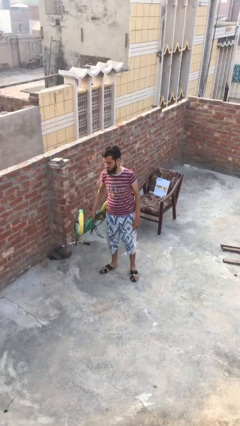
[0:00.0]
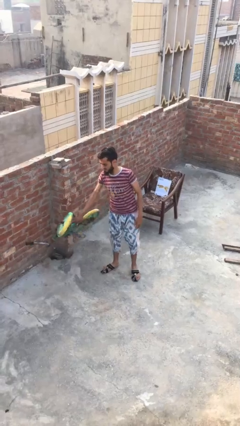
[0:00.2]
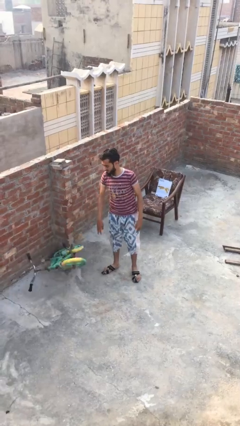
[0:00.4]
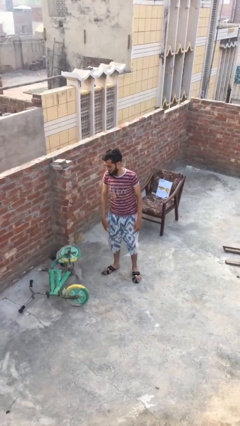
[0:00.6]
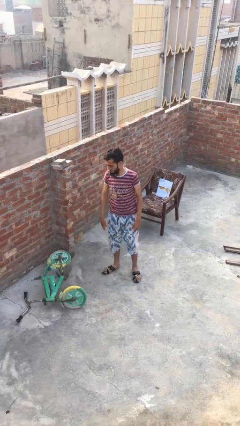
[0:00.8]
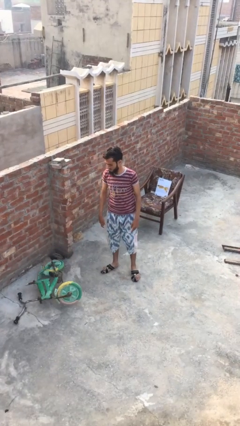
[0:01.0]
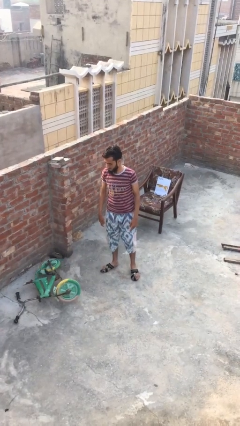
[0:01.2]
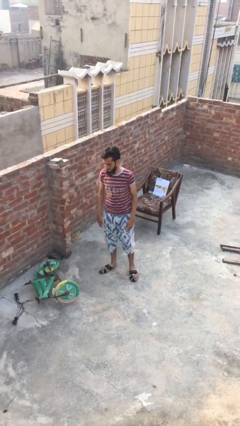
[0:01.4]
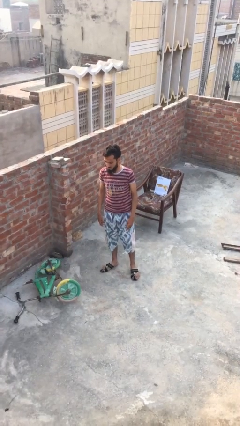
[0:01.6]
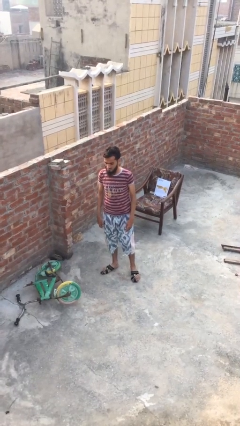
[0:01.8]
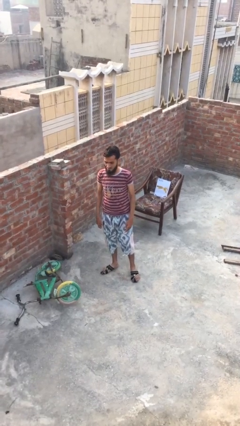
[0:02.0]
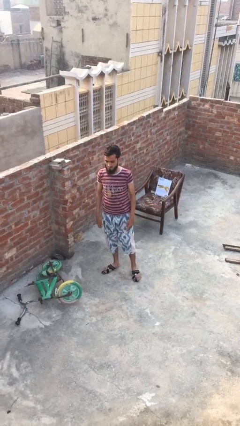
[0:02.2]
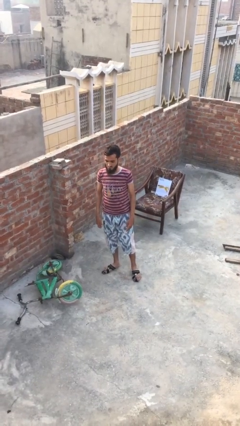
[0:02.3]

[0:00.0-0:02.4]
person puts down object on floor

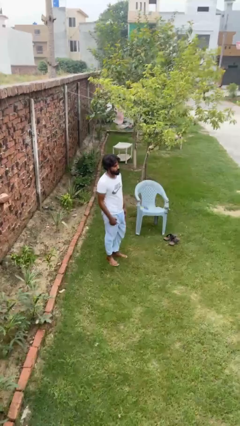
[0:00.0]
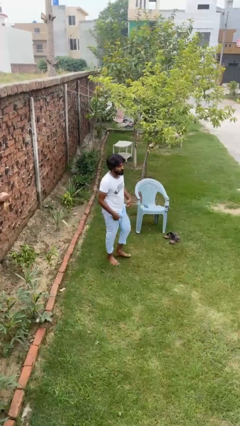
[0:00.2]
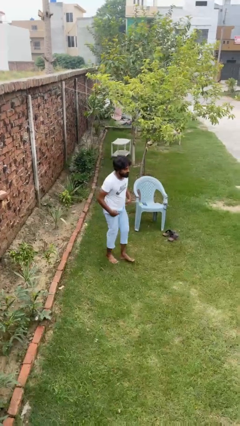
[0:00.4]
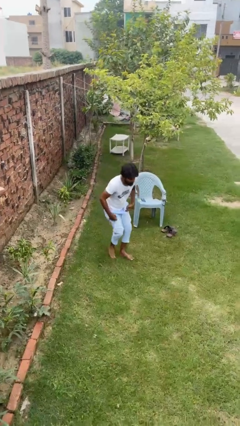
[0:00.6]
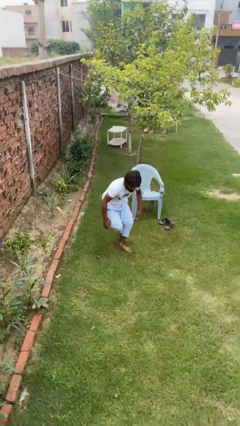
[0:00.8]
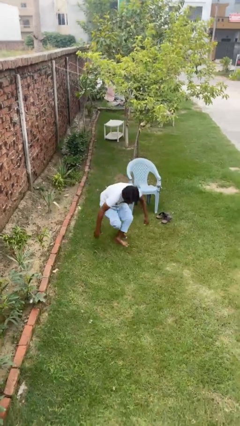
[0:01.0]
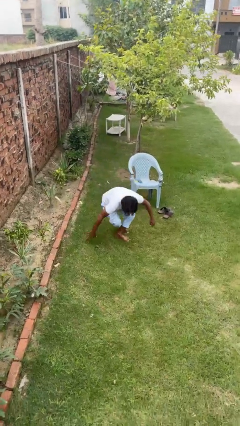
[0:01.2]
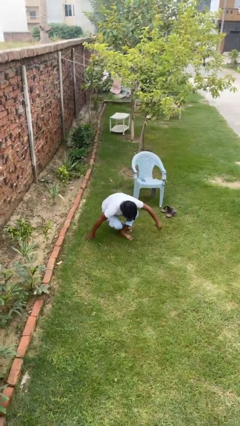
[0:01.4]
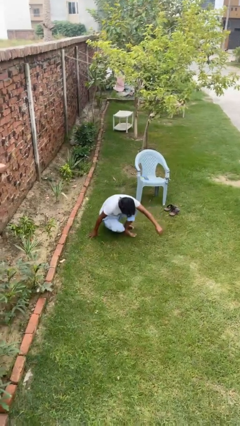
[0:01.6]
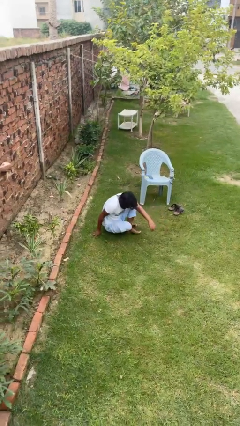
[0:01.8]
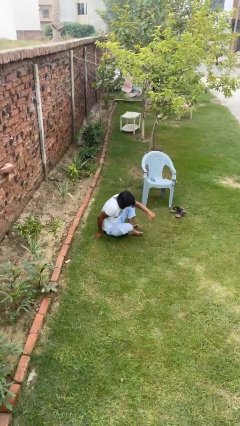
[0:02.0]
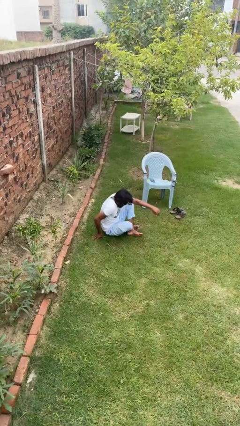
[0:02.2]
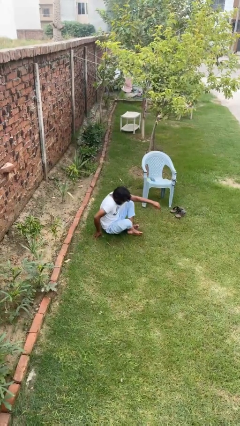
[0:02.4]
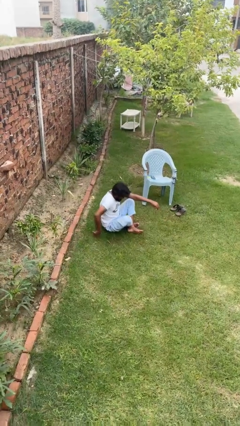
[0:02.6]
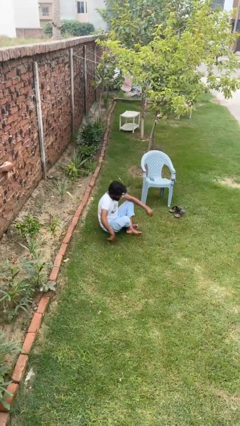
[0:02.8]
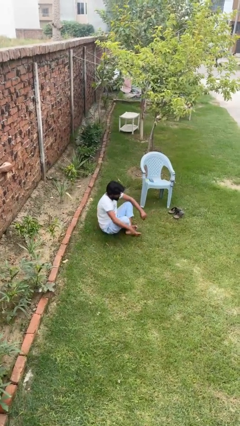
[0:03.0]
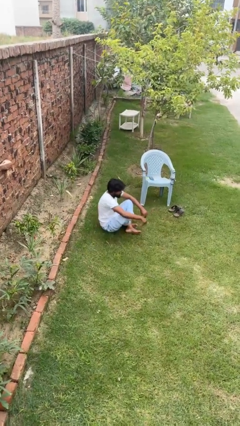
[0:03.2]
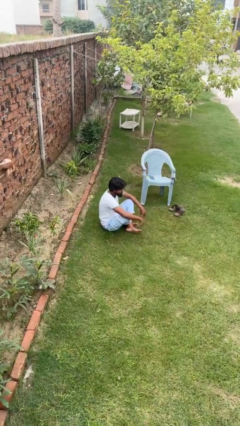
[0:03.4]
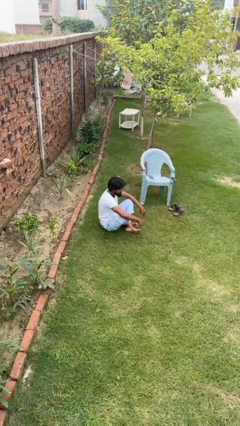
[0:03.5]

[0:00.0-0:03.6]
person sits crisscross

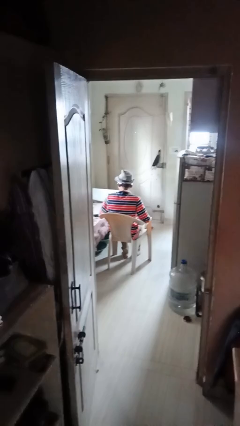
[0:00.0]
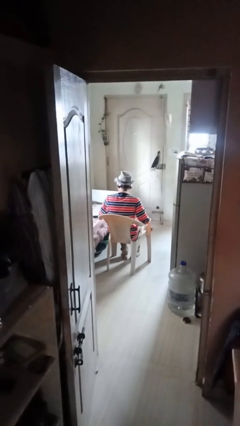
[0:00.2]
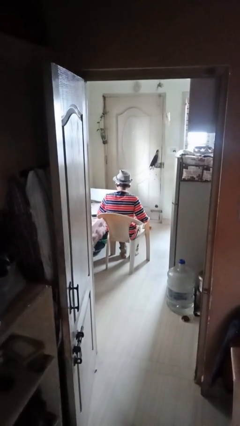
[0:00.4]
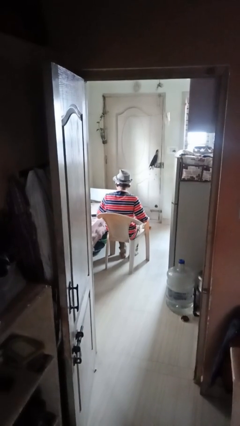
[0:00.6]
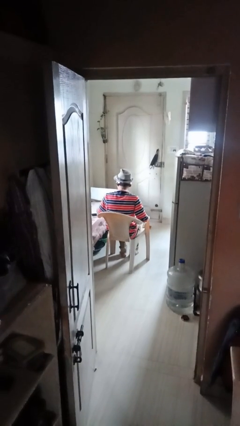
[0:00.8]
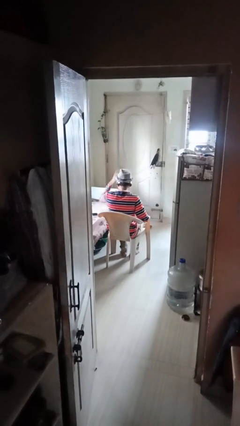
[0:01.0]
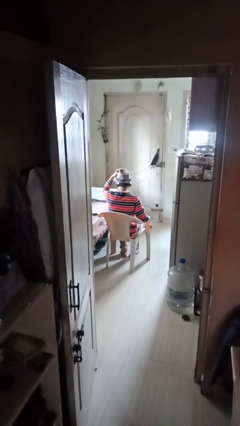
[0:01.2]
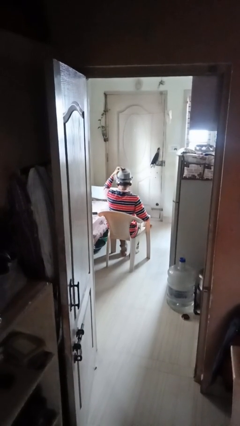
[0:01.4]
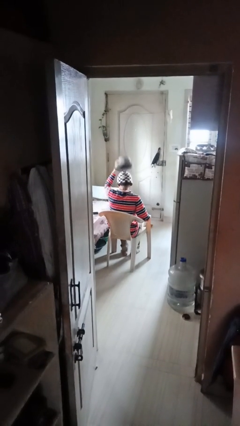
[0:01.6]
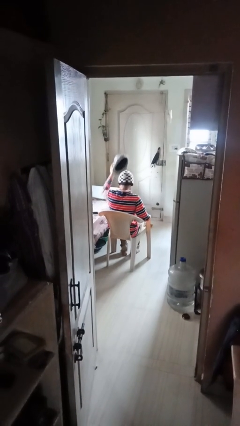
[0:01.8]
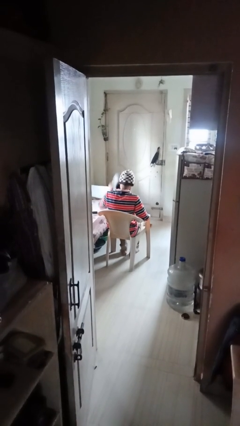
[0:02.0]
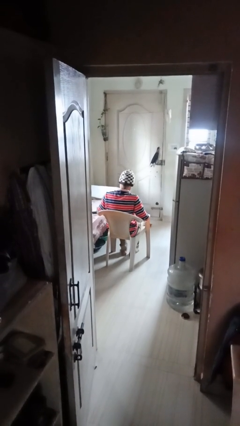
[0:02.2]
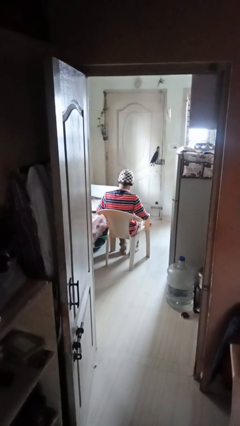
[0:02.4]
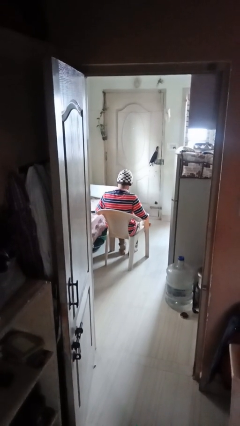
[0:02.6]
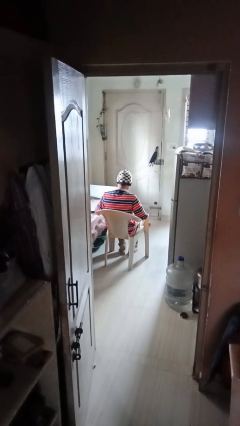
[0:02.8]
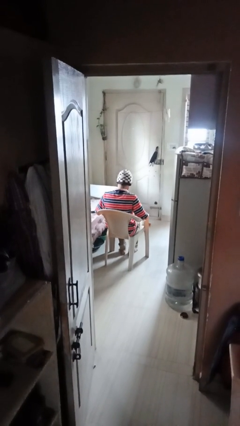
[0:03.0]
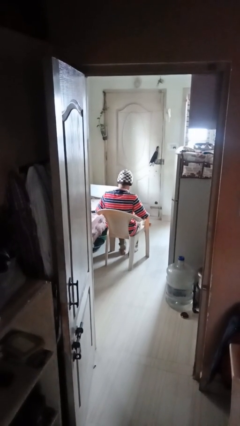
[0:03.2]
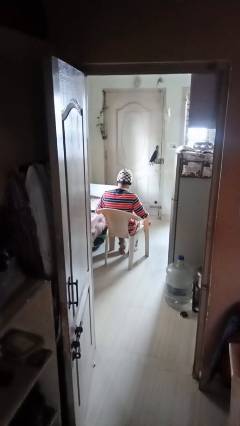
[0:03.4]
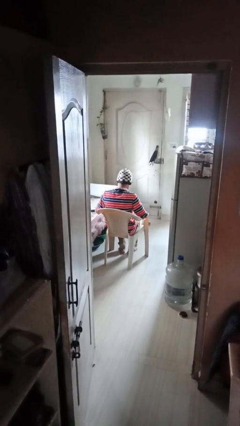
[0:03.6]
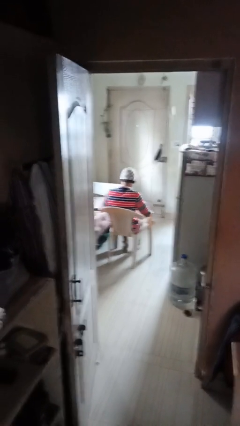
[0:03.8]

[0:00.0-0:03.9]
person takes off hat

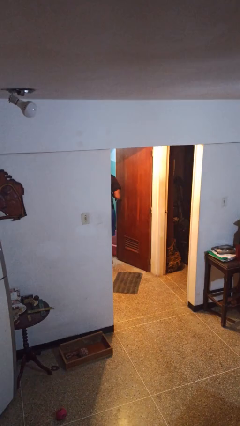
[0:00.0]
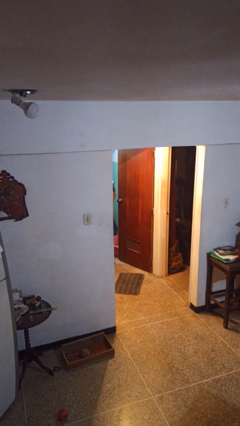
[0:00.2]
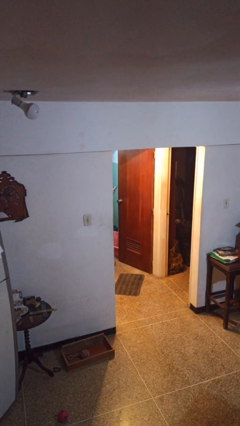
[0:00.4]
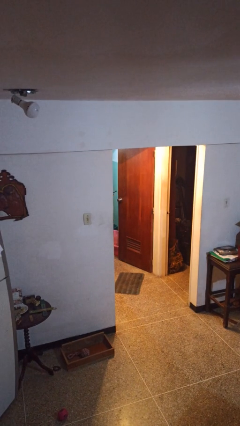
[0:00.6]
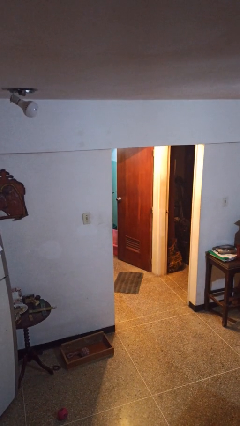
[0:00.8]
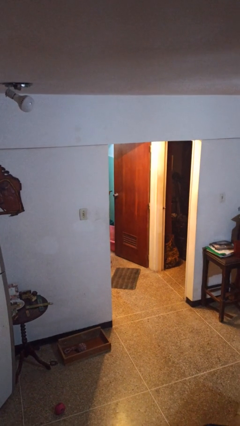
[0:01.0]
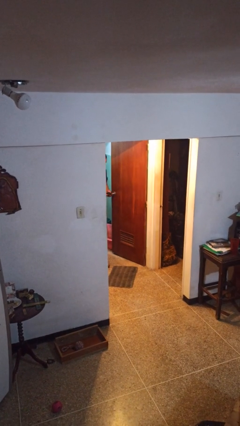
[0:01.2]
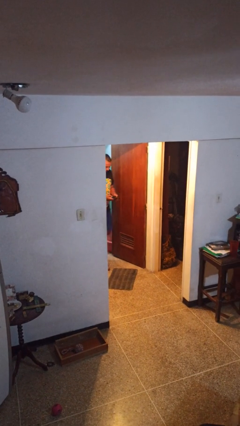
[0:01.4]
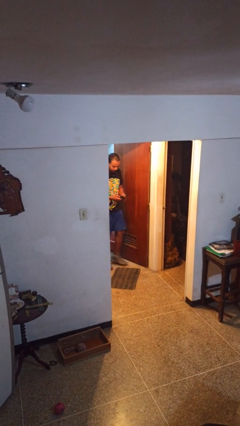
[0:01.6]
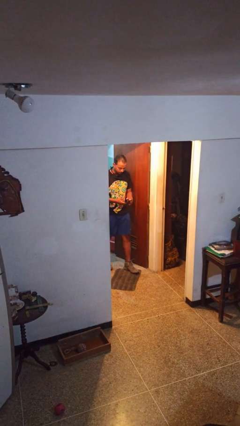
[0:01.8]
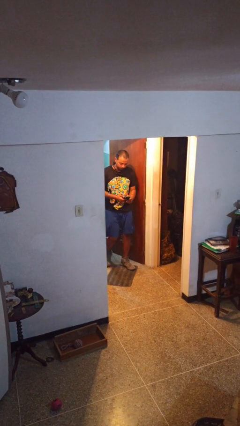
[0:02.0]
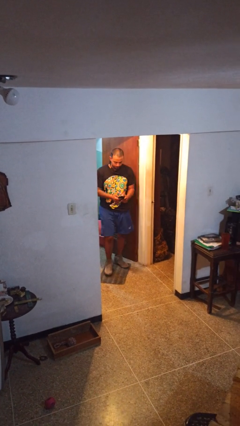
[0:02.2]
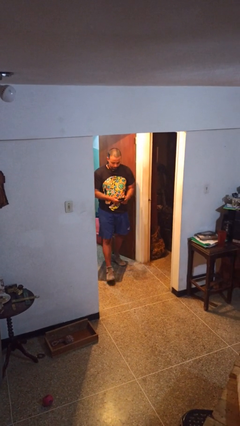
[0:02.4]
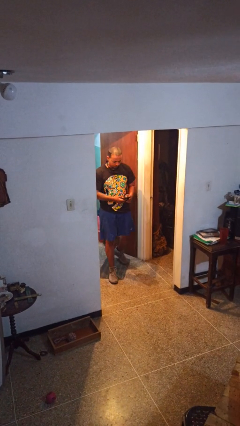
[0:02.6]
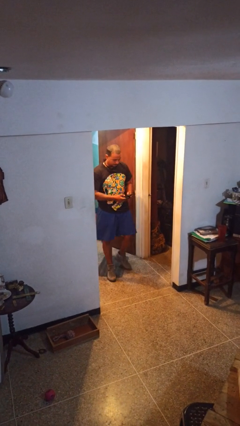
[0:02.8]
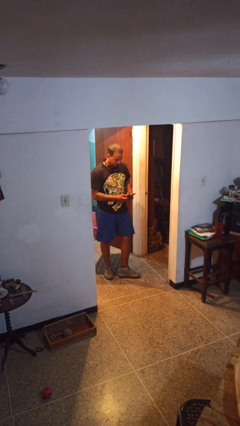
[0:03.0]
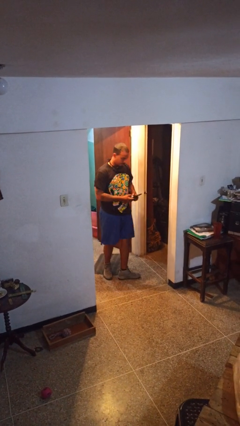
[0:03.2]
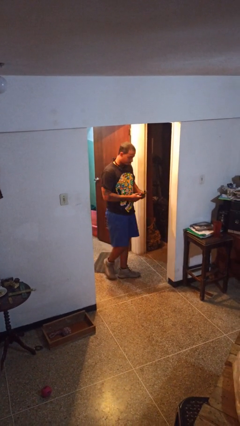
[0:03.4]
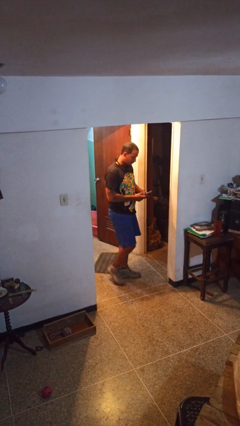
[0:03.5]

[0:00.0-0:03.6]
person enters scene through structure

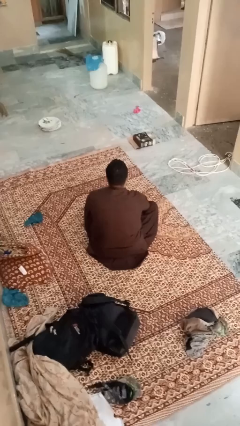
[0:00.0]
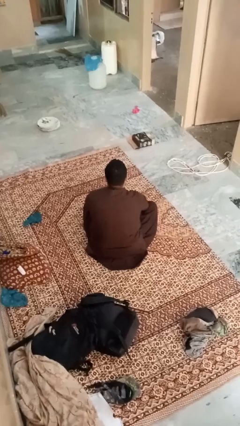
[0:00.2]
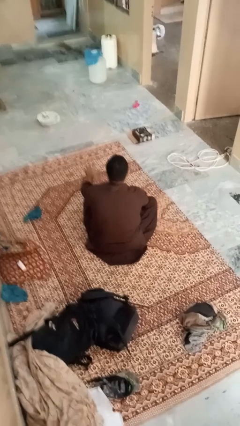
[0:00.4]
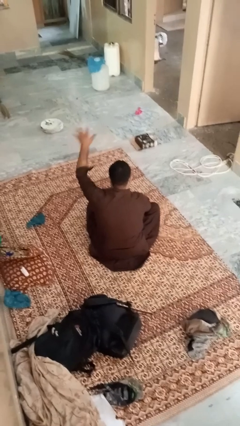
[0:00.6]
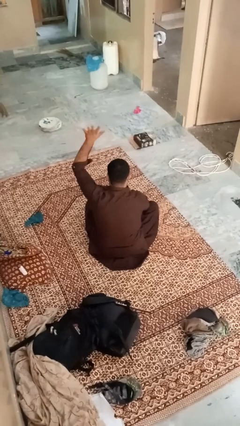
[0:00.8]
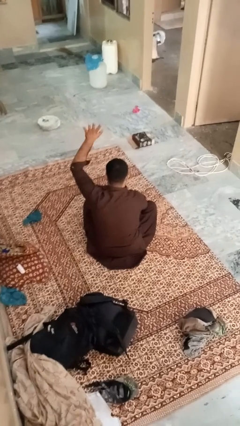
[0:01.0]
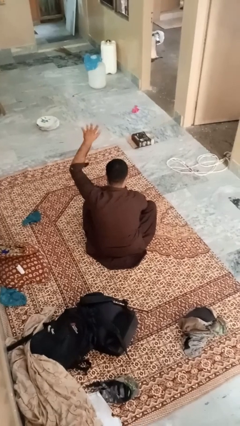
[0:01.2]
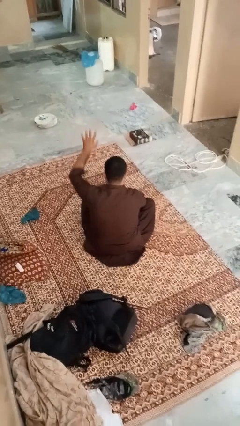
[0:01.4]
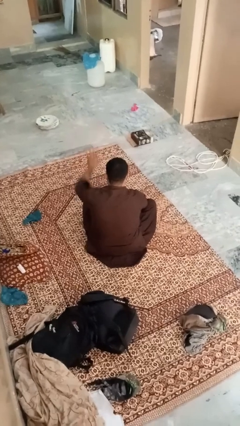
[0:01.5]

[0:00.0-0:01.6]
person gestures number five

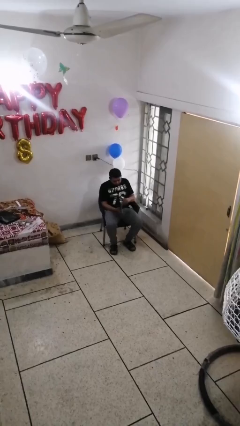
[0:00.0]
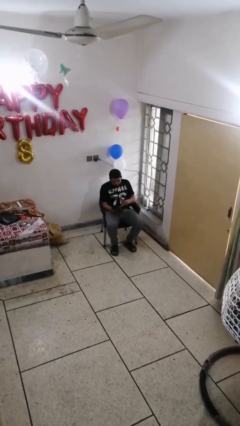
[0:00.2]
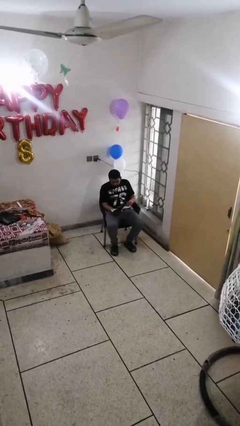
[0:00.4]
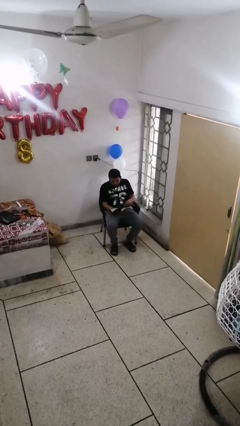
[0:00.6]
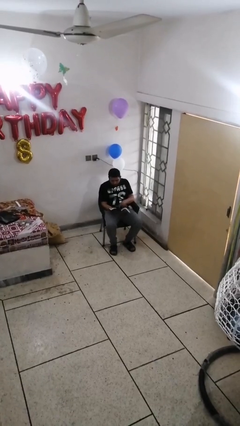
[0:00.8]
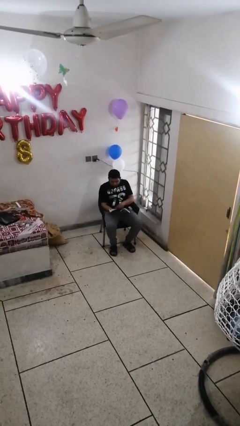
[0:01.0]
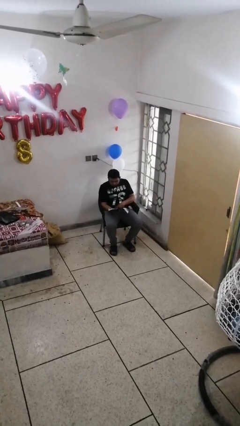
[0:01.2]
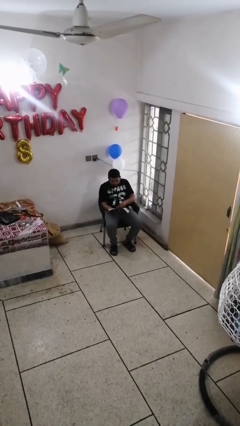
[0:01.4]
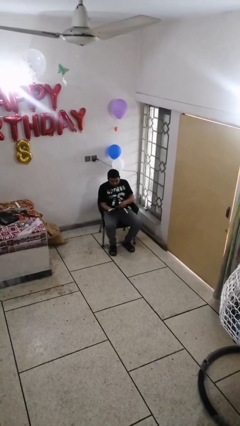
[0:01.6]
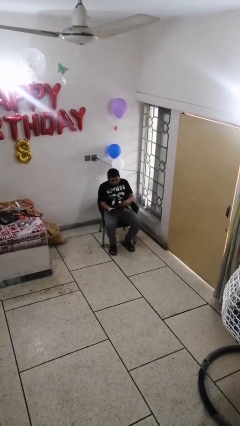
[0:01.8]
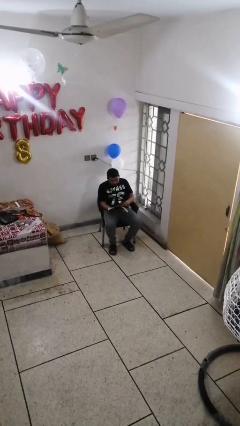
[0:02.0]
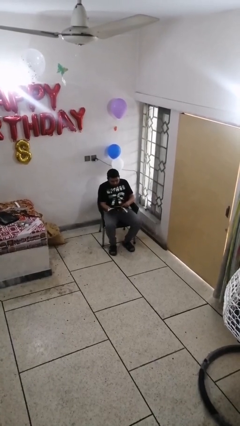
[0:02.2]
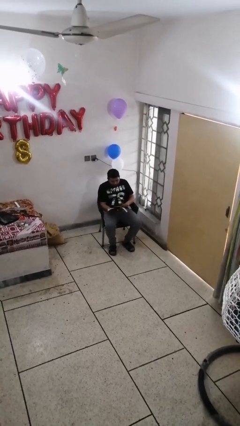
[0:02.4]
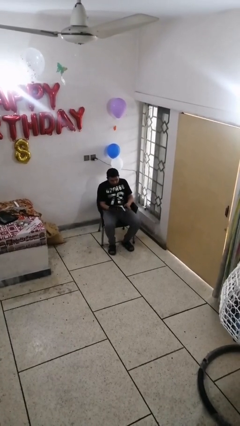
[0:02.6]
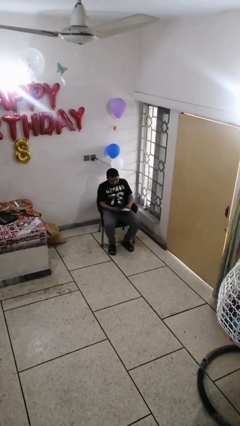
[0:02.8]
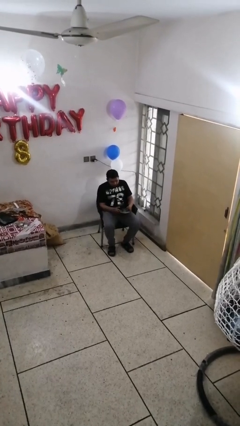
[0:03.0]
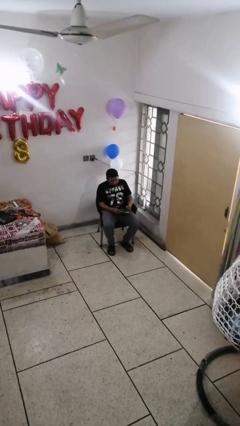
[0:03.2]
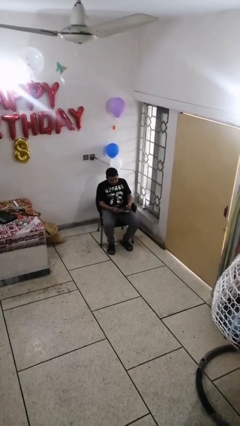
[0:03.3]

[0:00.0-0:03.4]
person reads document
